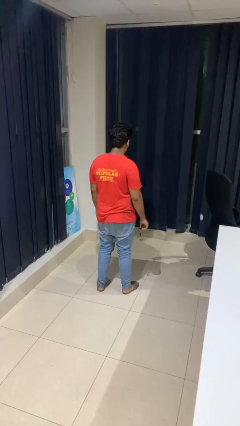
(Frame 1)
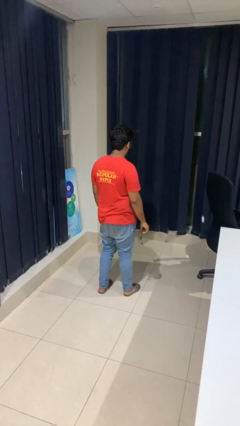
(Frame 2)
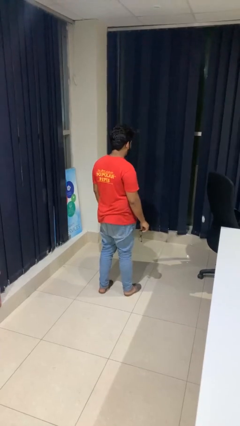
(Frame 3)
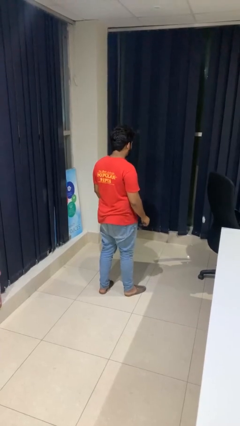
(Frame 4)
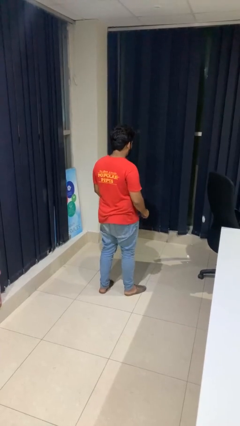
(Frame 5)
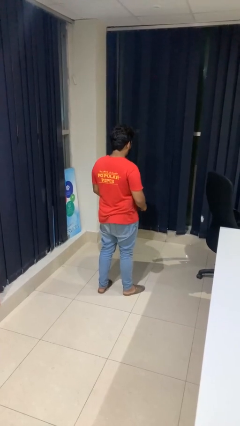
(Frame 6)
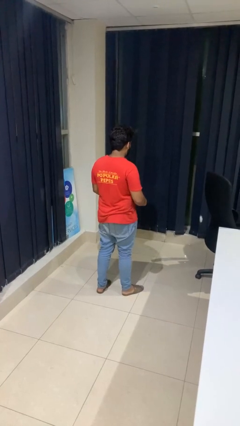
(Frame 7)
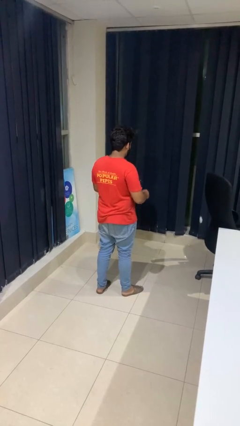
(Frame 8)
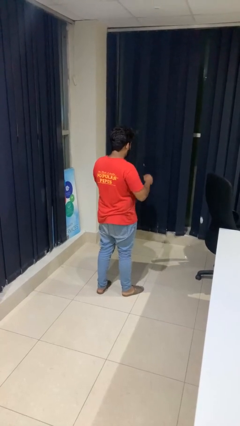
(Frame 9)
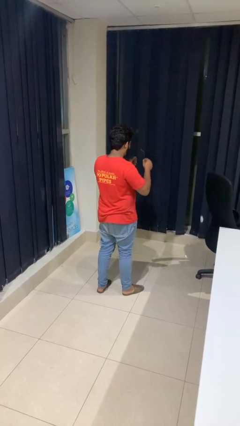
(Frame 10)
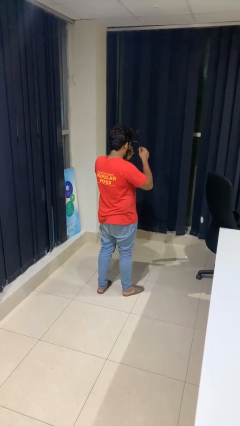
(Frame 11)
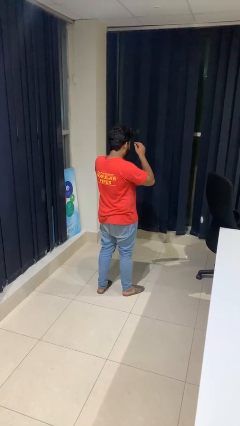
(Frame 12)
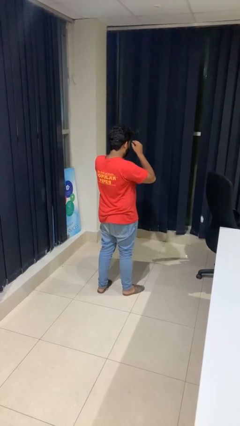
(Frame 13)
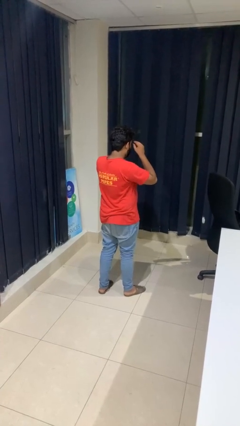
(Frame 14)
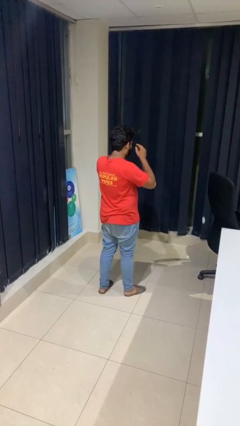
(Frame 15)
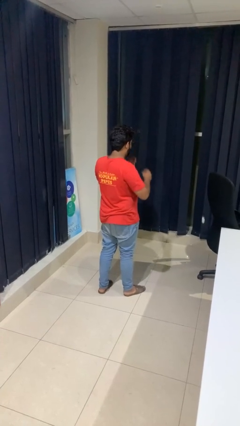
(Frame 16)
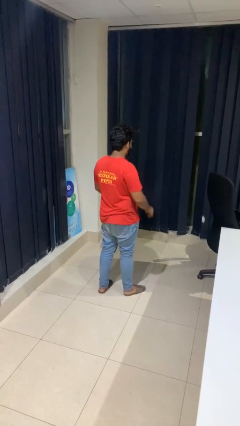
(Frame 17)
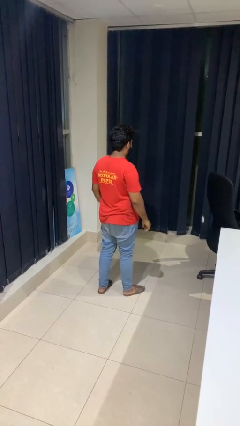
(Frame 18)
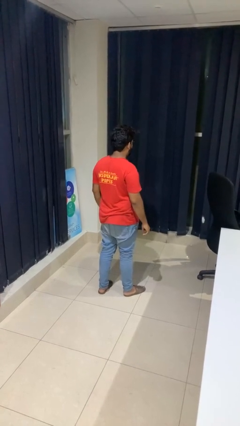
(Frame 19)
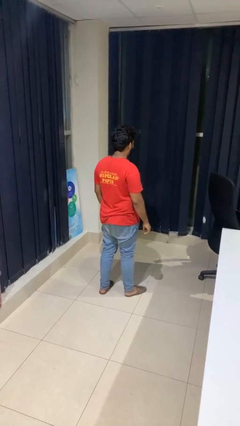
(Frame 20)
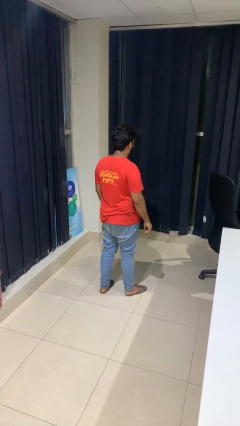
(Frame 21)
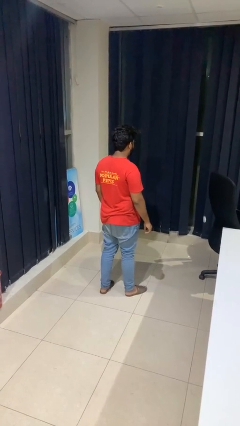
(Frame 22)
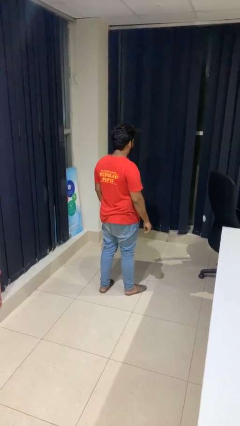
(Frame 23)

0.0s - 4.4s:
person puts on glasses

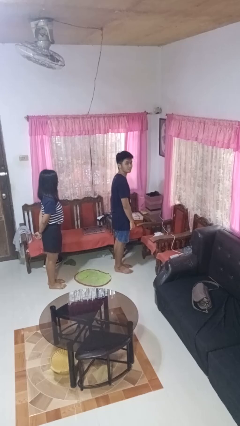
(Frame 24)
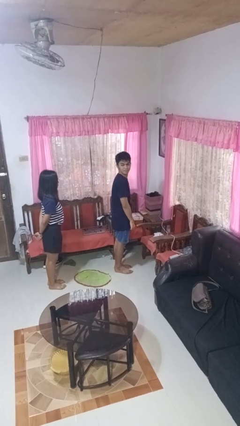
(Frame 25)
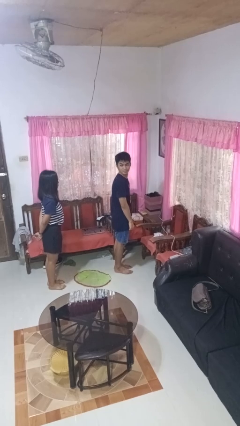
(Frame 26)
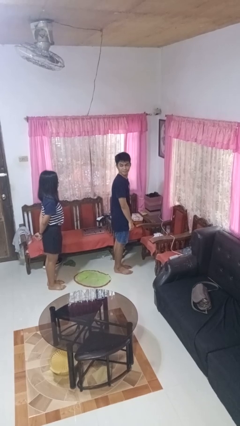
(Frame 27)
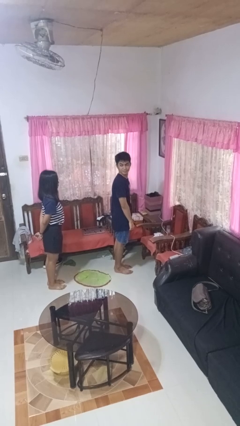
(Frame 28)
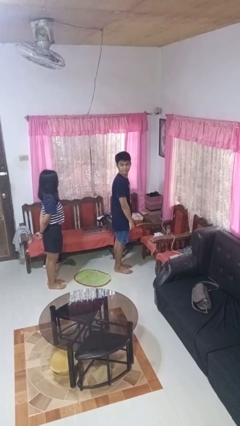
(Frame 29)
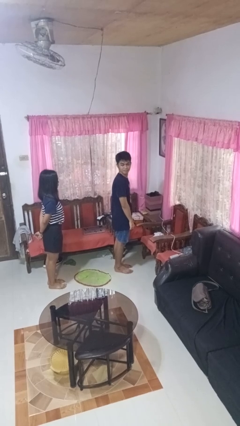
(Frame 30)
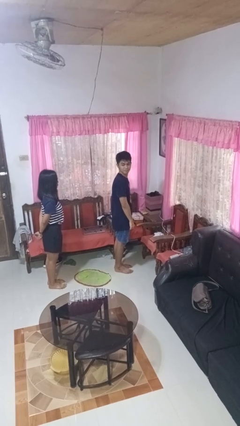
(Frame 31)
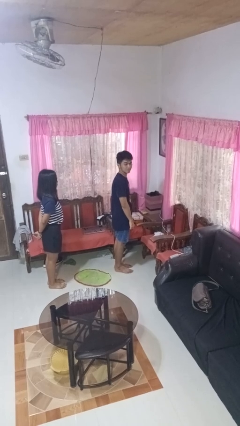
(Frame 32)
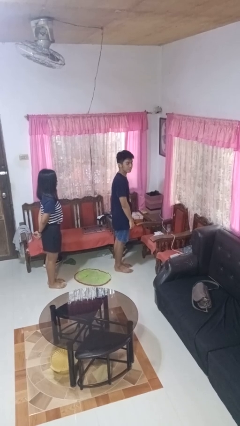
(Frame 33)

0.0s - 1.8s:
person looks over shoulder

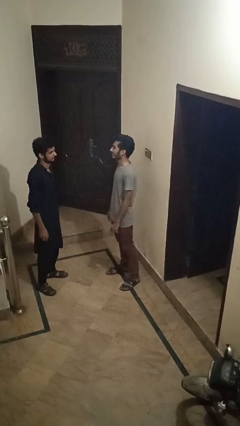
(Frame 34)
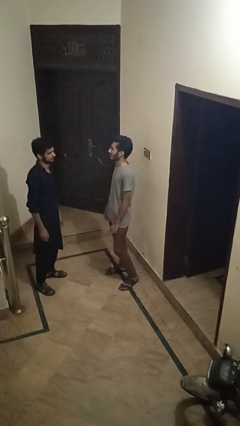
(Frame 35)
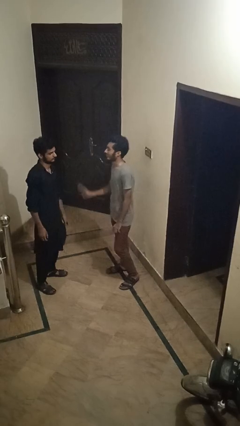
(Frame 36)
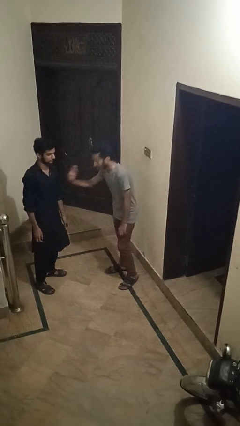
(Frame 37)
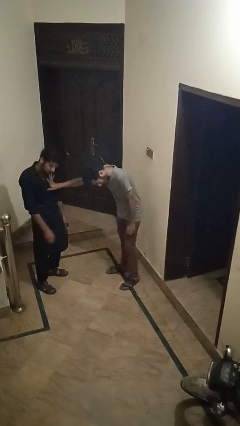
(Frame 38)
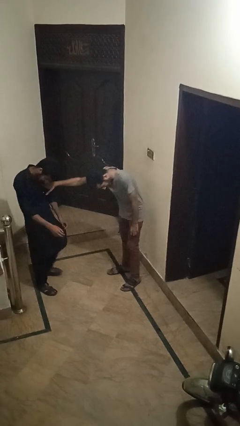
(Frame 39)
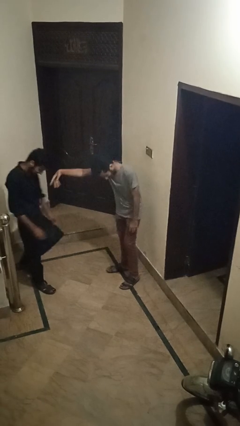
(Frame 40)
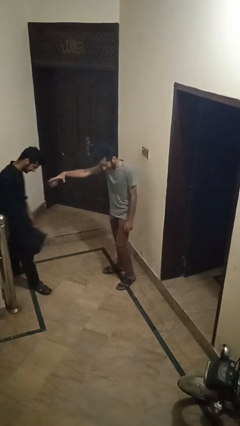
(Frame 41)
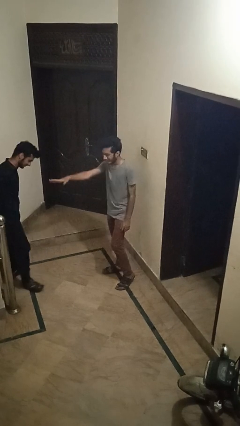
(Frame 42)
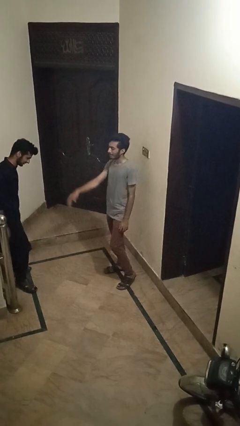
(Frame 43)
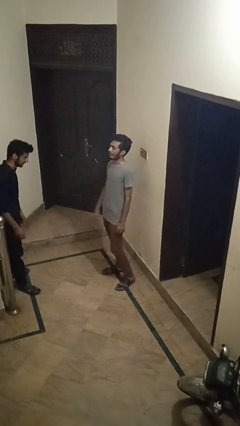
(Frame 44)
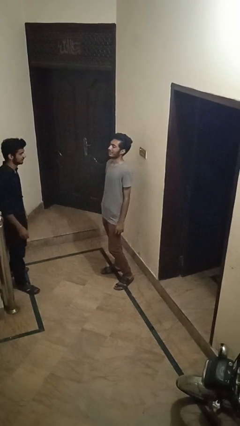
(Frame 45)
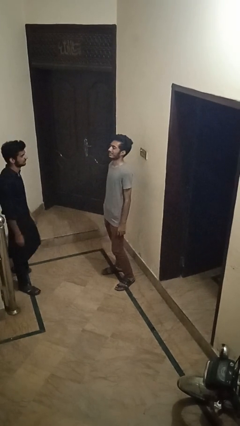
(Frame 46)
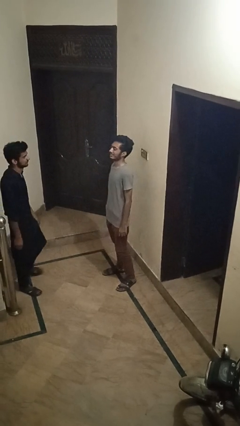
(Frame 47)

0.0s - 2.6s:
person shoves person

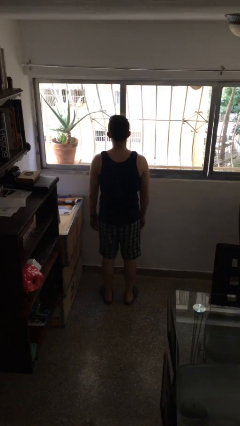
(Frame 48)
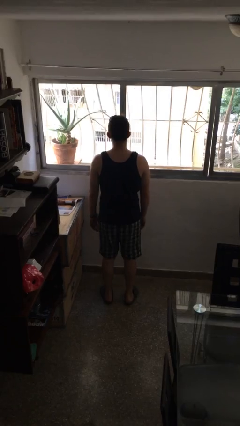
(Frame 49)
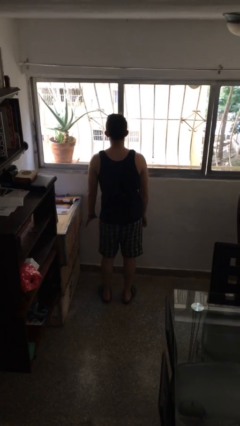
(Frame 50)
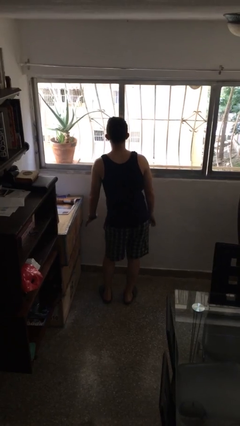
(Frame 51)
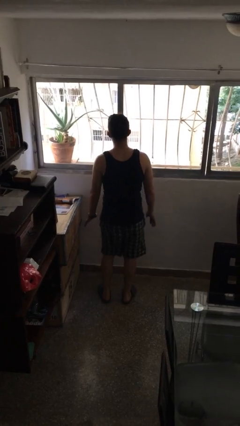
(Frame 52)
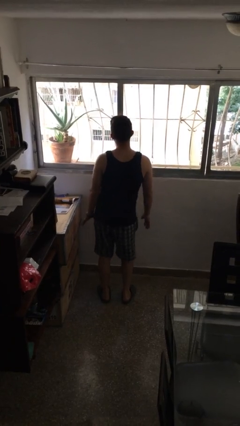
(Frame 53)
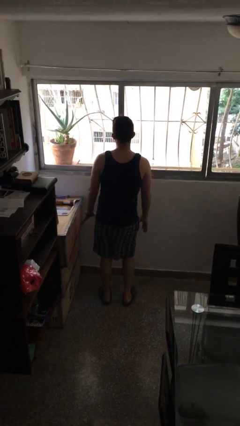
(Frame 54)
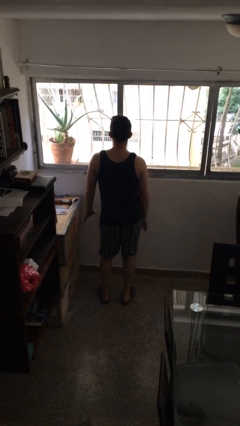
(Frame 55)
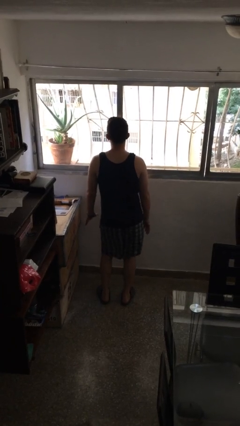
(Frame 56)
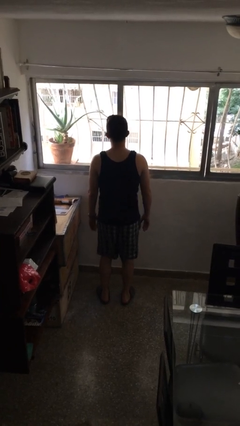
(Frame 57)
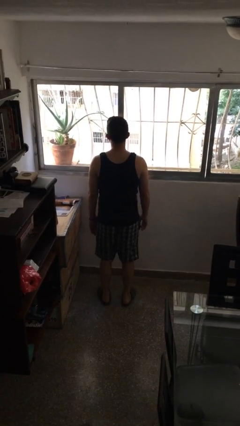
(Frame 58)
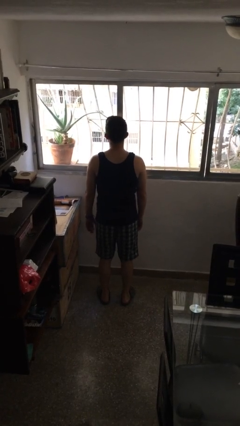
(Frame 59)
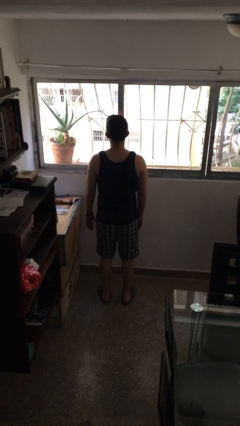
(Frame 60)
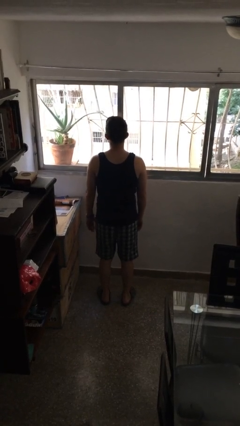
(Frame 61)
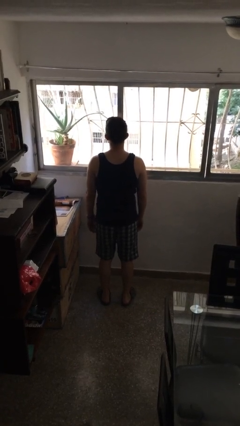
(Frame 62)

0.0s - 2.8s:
person wiggles hips

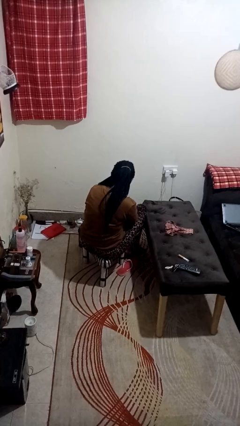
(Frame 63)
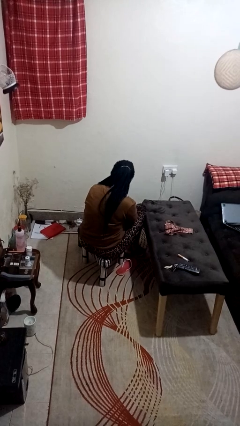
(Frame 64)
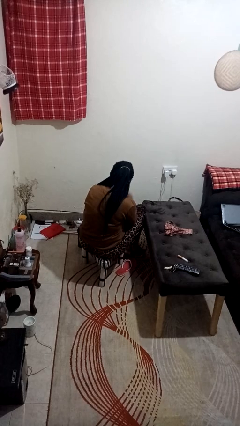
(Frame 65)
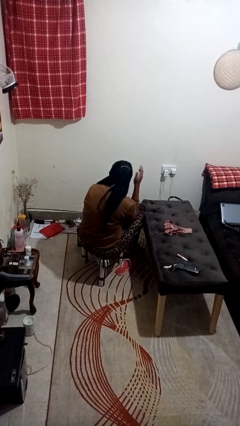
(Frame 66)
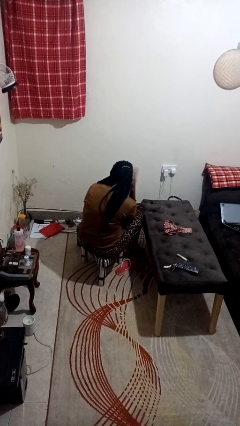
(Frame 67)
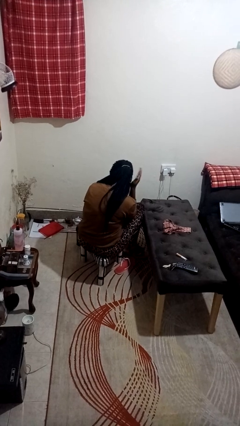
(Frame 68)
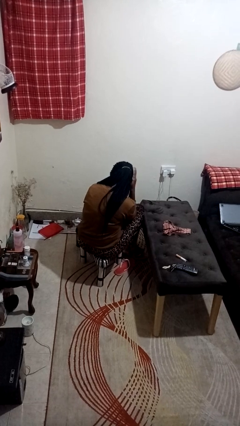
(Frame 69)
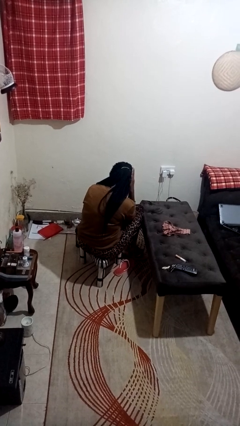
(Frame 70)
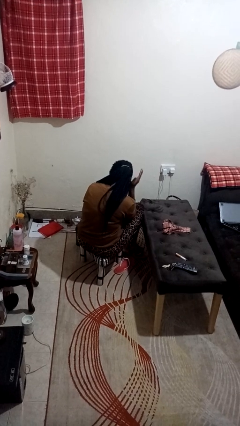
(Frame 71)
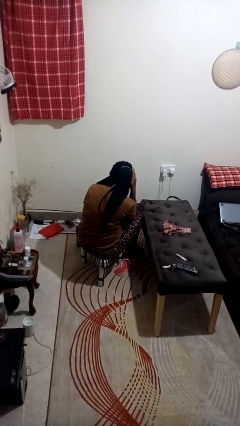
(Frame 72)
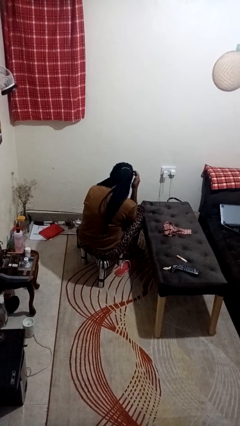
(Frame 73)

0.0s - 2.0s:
person pats head

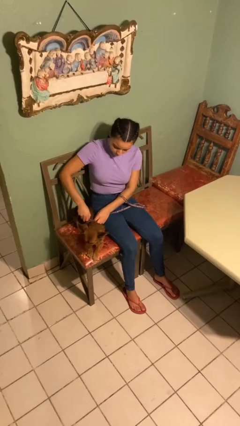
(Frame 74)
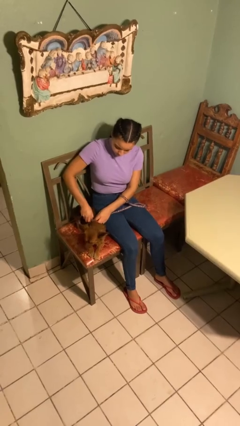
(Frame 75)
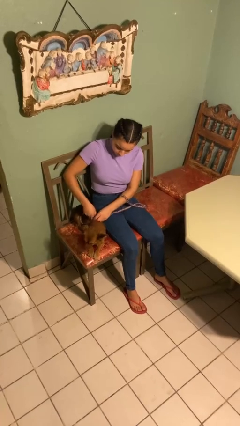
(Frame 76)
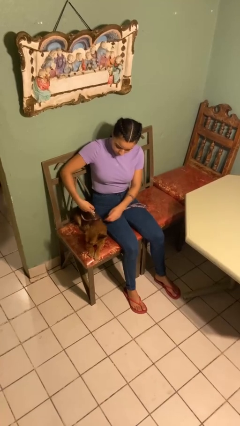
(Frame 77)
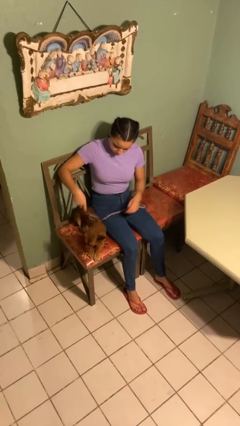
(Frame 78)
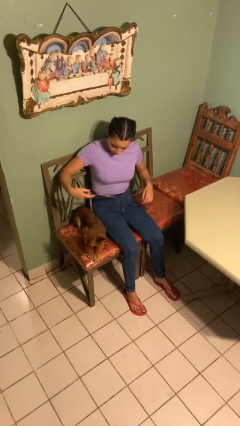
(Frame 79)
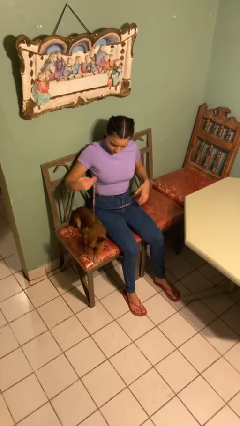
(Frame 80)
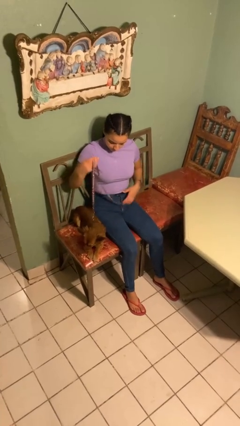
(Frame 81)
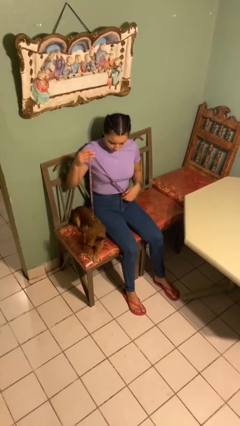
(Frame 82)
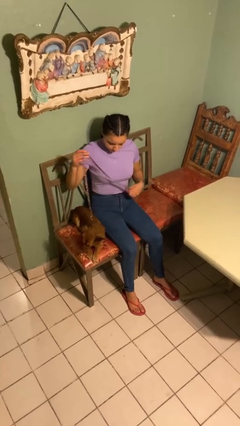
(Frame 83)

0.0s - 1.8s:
person attaches leash to dog

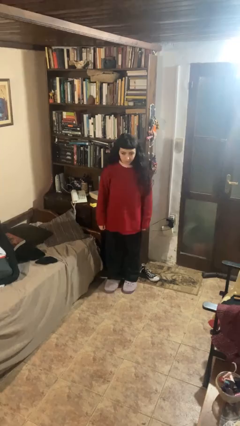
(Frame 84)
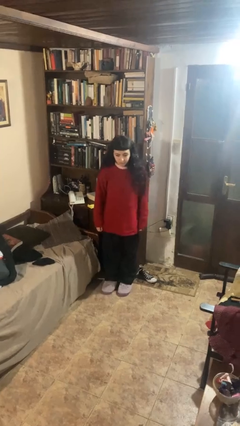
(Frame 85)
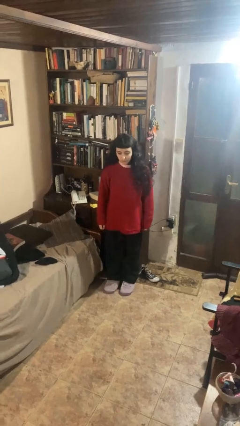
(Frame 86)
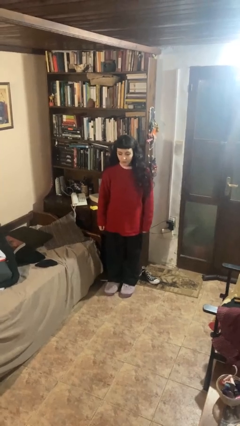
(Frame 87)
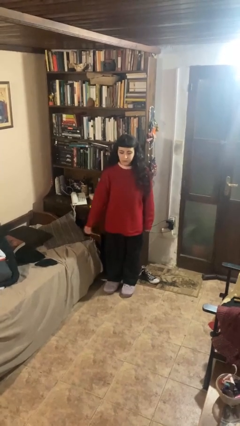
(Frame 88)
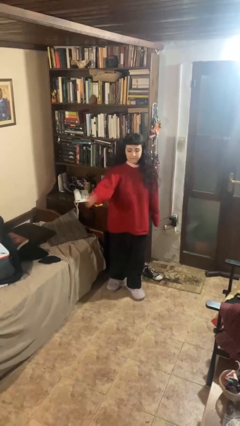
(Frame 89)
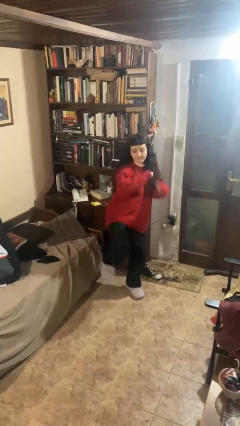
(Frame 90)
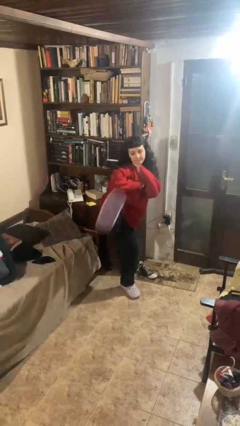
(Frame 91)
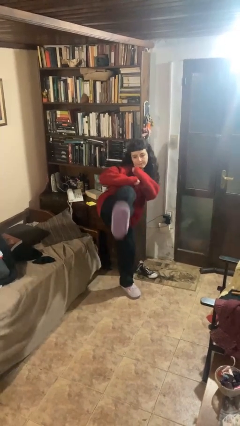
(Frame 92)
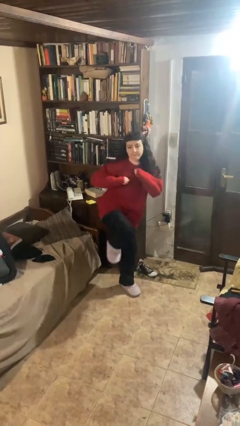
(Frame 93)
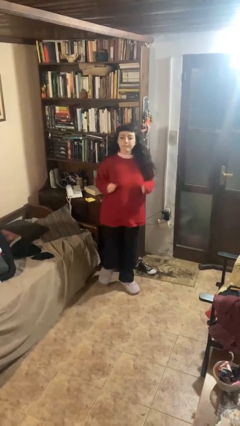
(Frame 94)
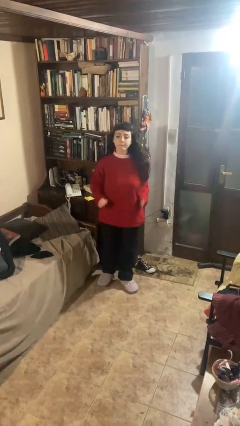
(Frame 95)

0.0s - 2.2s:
person karate kicks
